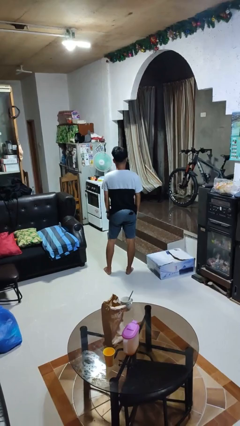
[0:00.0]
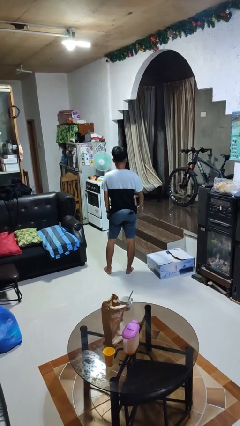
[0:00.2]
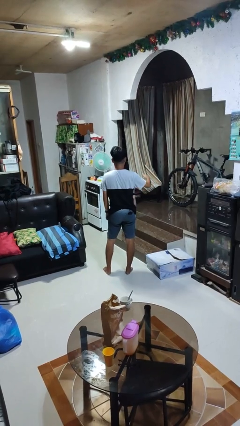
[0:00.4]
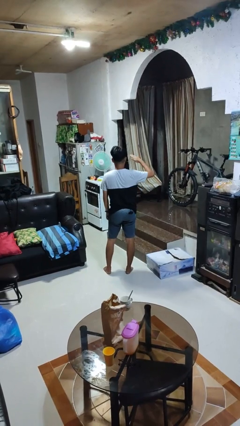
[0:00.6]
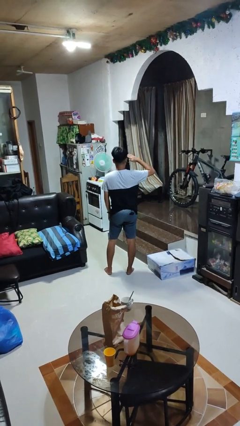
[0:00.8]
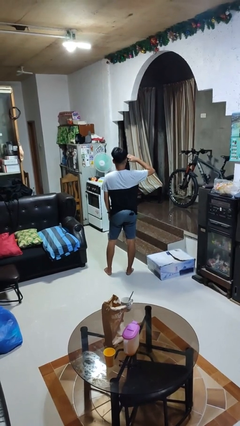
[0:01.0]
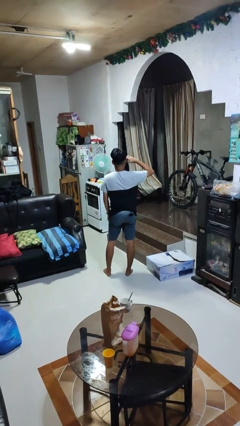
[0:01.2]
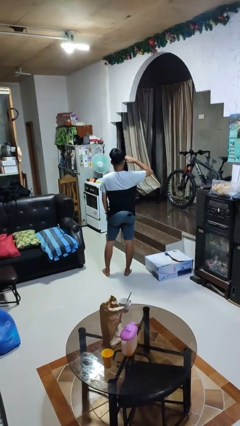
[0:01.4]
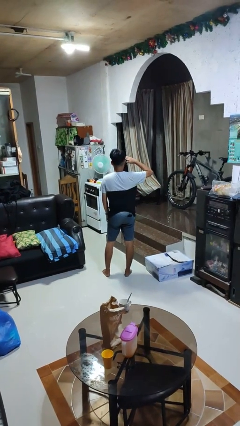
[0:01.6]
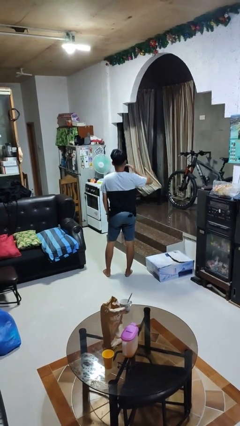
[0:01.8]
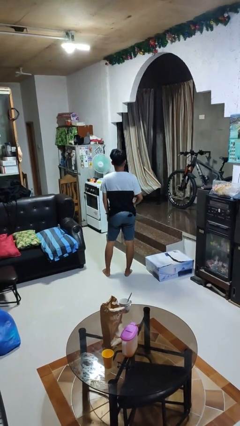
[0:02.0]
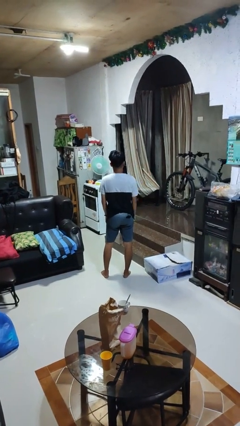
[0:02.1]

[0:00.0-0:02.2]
person salutes

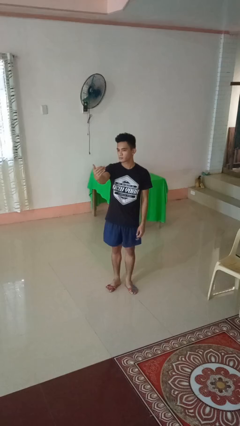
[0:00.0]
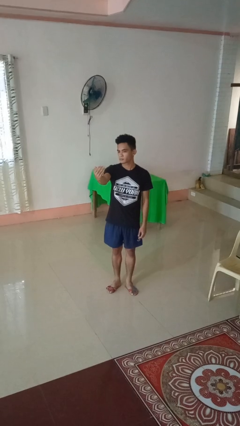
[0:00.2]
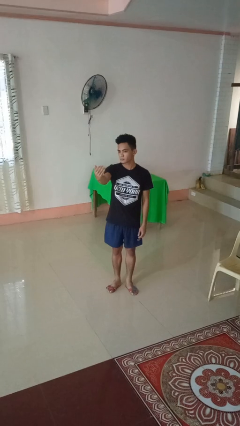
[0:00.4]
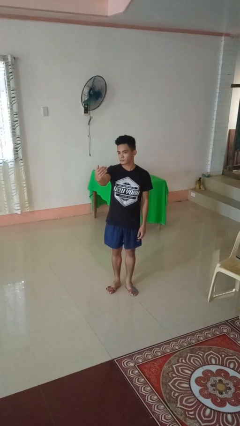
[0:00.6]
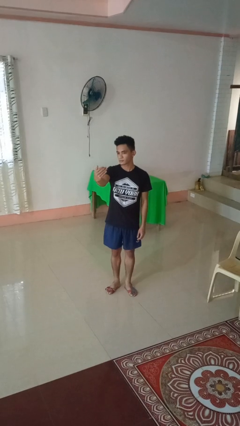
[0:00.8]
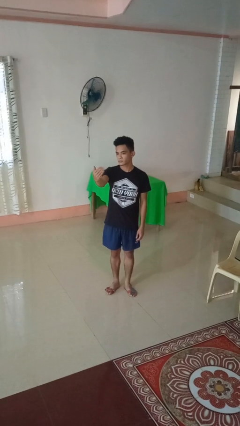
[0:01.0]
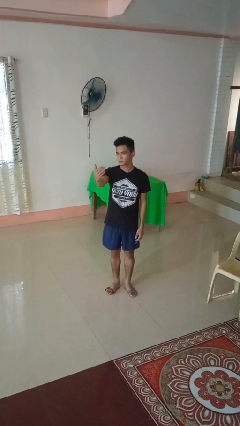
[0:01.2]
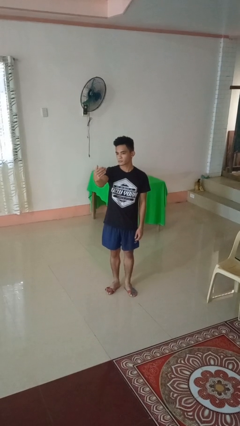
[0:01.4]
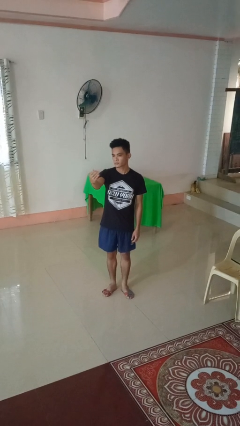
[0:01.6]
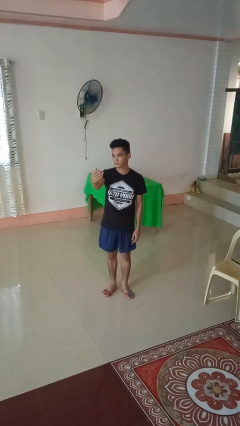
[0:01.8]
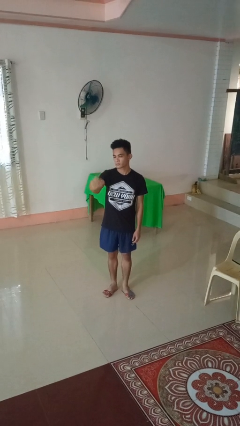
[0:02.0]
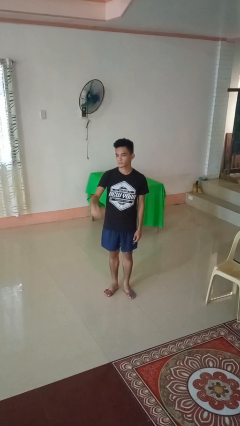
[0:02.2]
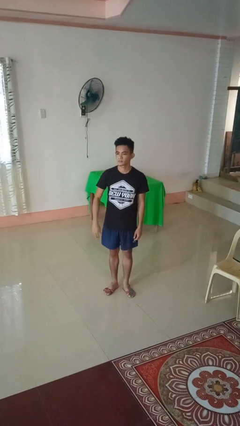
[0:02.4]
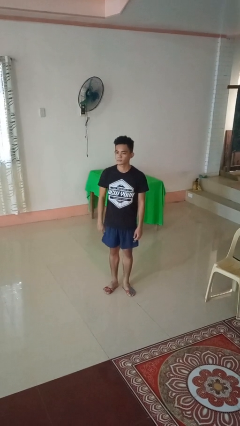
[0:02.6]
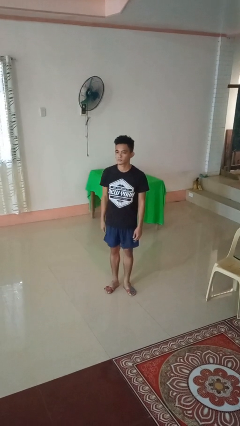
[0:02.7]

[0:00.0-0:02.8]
person gestures come here

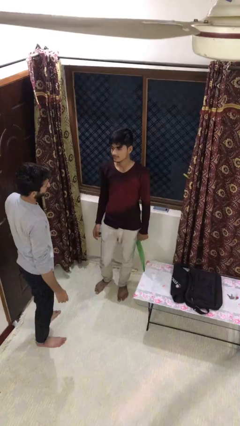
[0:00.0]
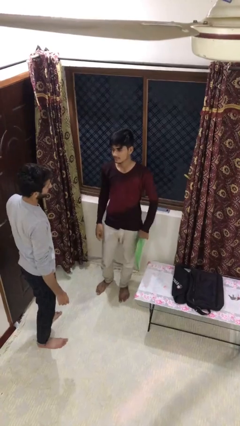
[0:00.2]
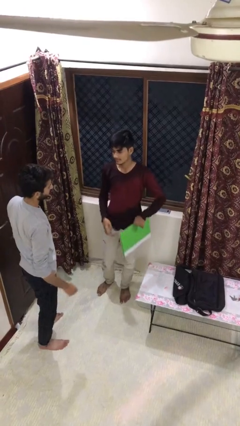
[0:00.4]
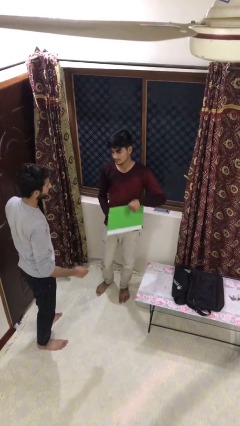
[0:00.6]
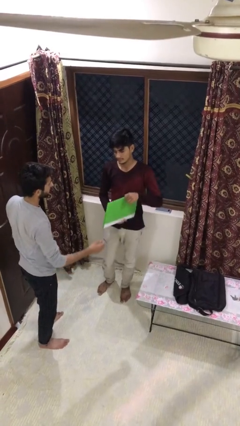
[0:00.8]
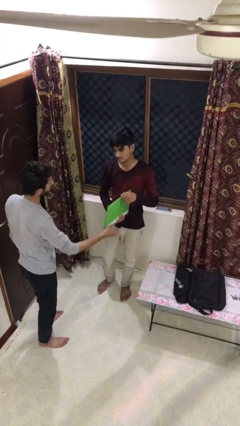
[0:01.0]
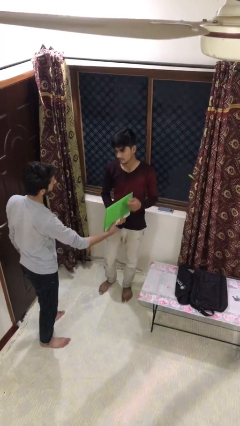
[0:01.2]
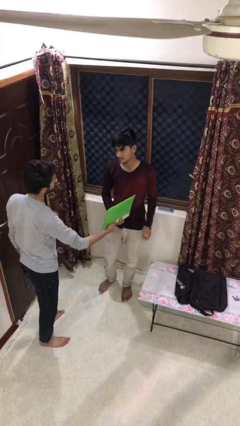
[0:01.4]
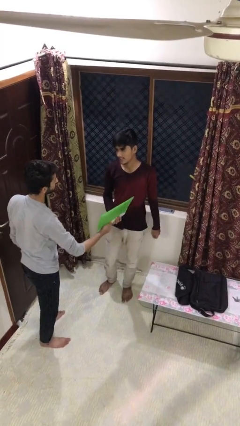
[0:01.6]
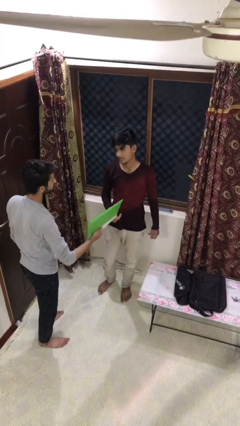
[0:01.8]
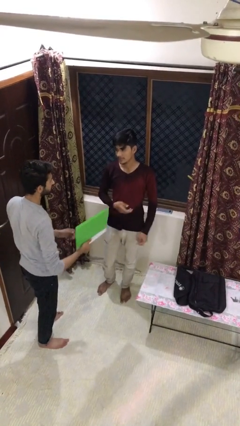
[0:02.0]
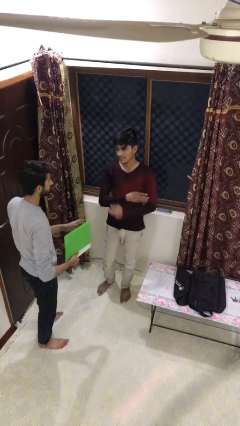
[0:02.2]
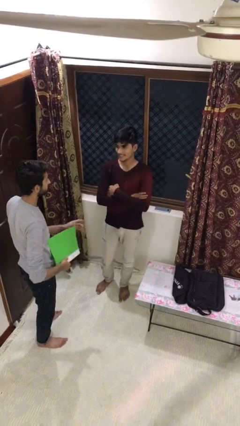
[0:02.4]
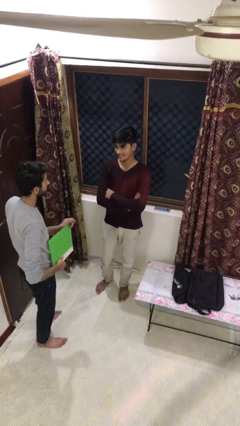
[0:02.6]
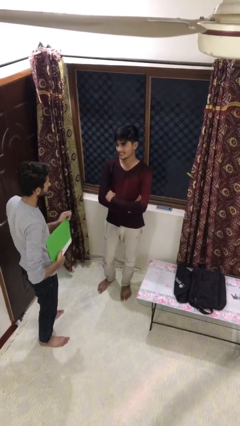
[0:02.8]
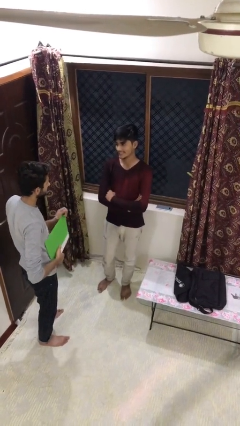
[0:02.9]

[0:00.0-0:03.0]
person transfers object to person

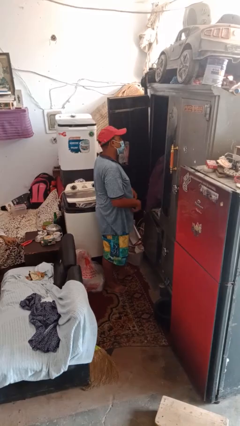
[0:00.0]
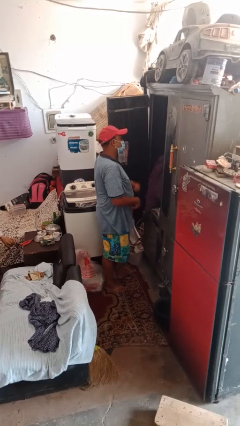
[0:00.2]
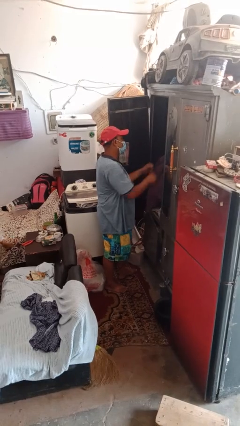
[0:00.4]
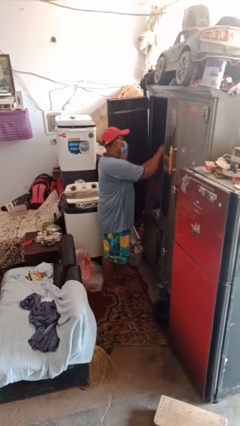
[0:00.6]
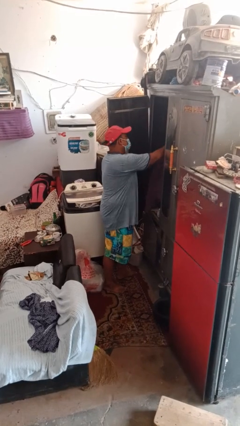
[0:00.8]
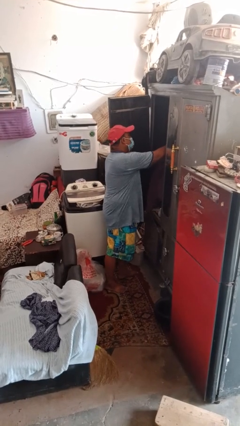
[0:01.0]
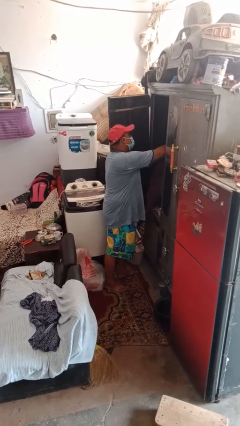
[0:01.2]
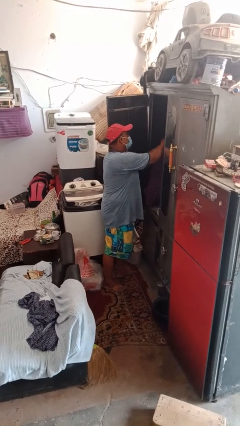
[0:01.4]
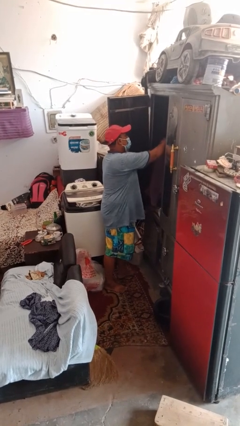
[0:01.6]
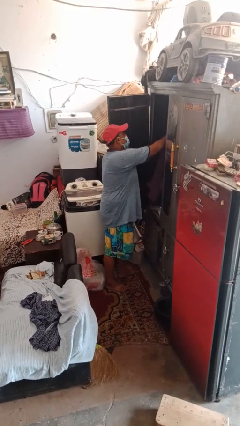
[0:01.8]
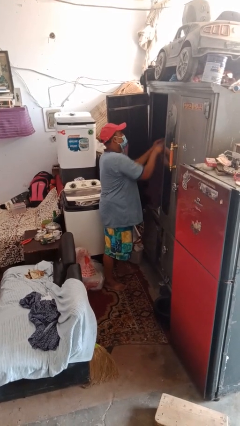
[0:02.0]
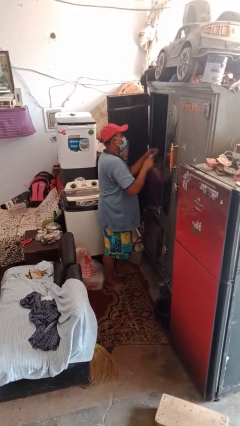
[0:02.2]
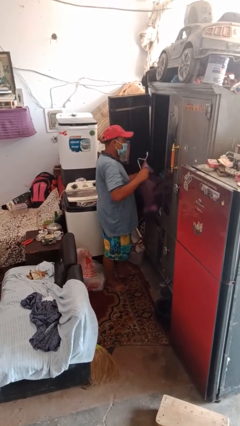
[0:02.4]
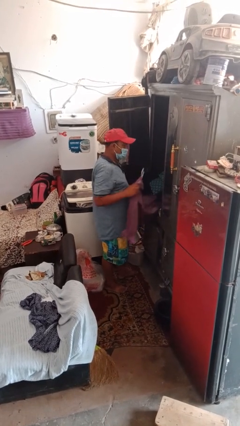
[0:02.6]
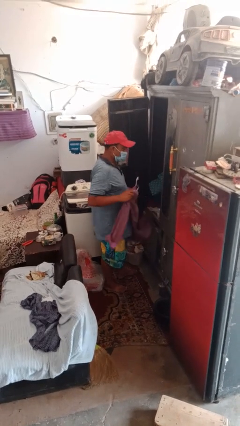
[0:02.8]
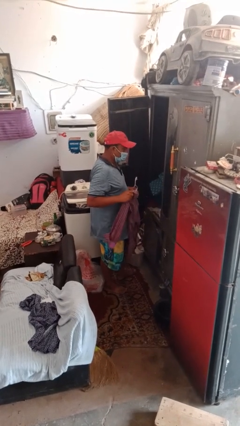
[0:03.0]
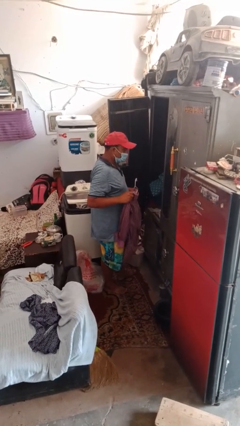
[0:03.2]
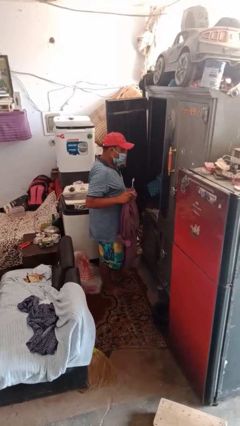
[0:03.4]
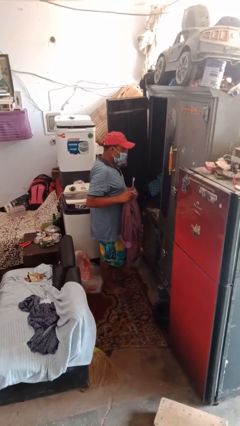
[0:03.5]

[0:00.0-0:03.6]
person takes clothes from closet

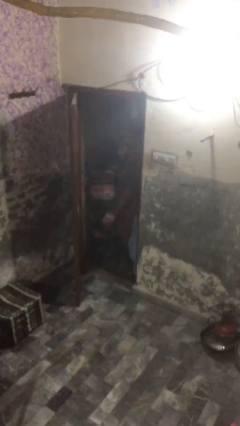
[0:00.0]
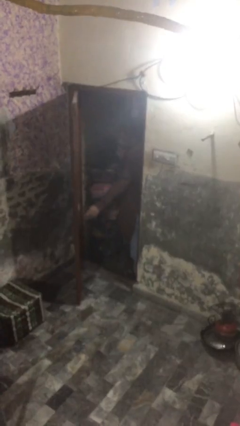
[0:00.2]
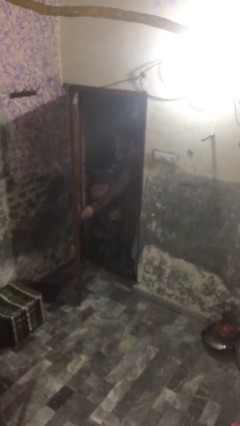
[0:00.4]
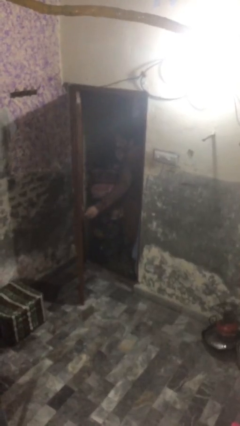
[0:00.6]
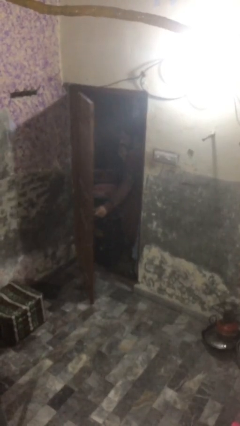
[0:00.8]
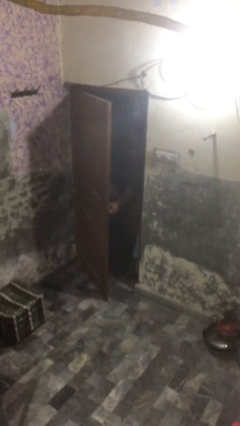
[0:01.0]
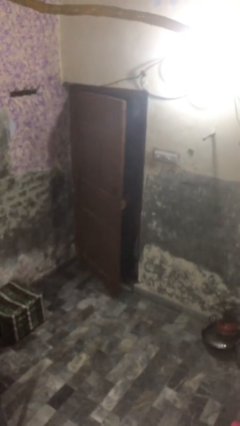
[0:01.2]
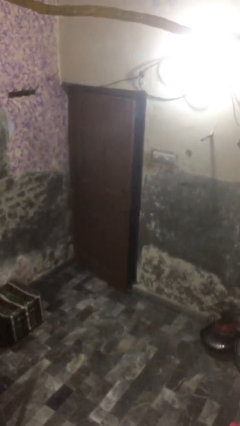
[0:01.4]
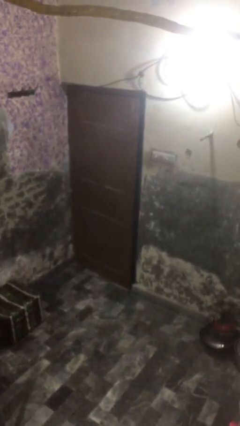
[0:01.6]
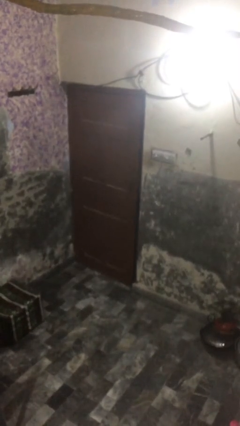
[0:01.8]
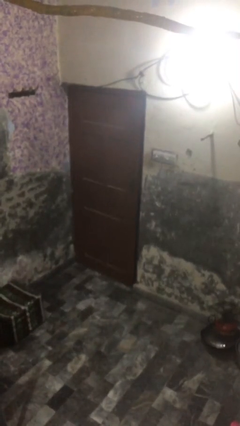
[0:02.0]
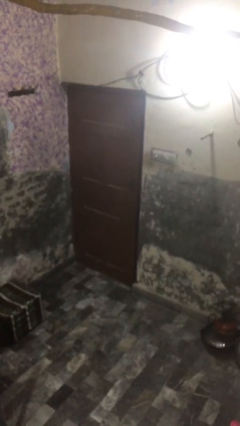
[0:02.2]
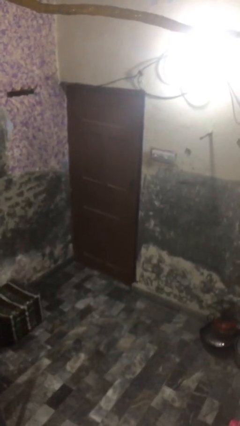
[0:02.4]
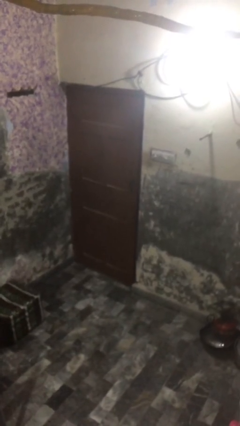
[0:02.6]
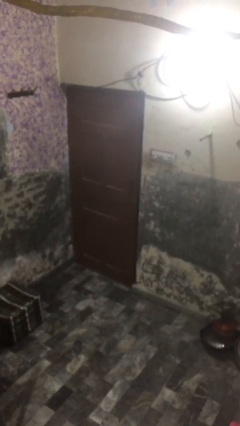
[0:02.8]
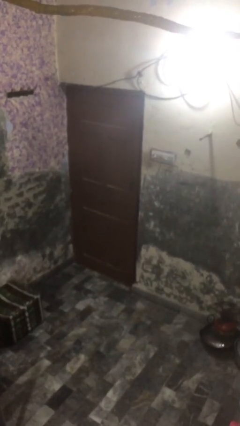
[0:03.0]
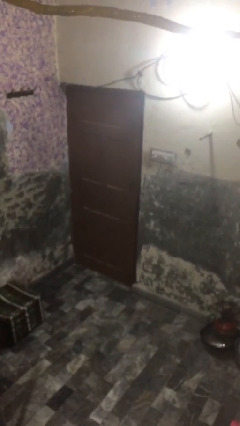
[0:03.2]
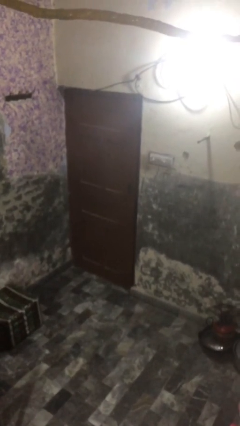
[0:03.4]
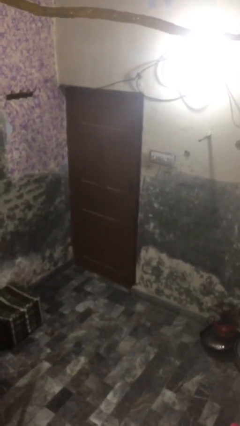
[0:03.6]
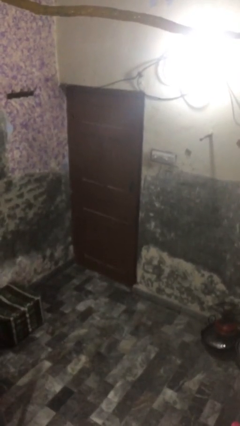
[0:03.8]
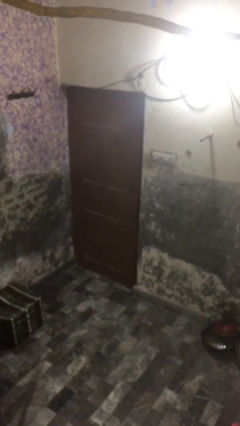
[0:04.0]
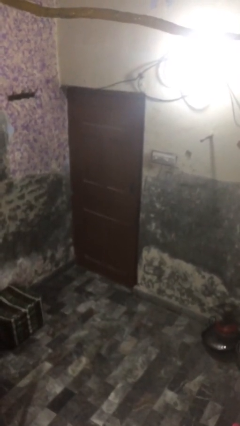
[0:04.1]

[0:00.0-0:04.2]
person closes facility door

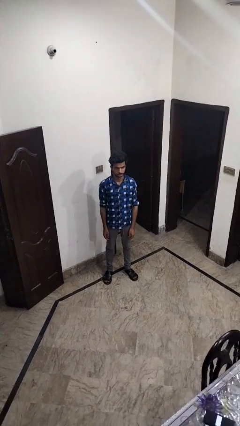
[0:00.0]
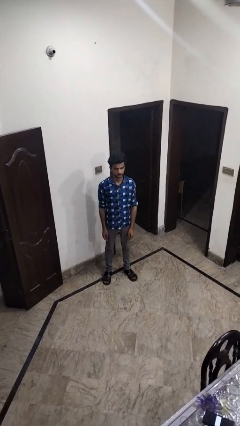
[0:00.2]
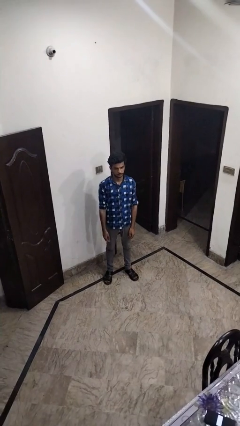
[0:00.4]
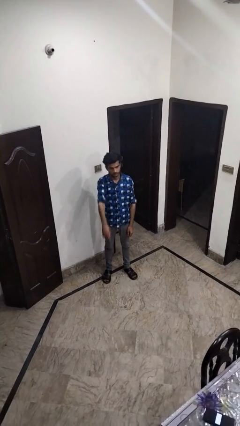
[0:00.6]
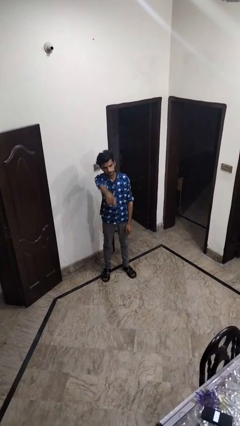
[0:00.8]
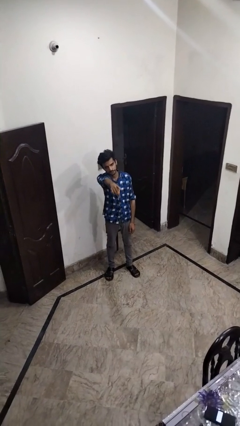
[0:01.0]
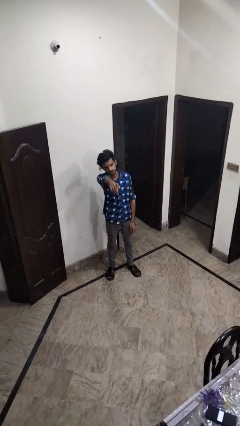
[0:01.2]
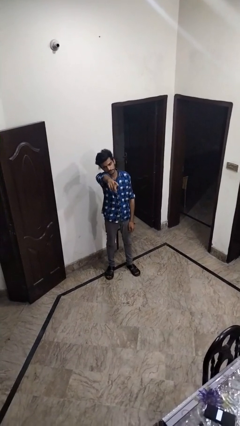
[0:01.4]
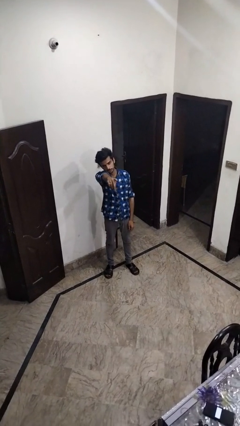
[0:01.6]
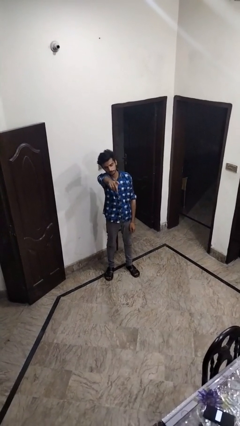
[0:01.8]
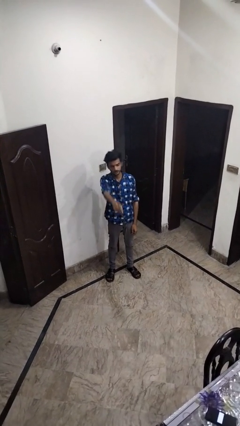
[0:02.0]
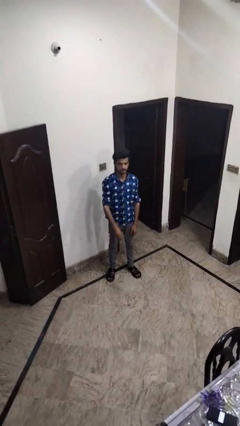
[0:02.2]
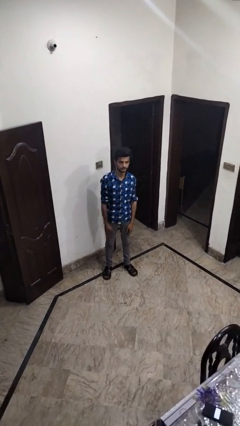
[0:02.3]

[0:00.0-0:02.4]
person points at person
